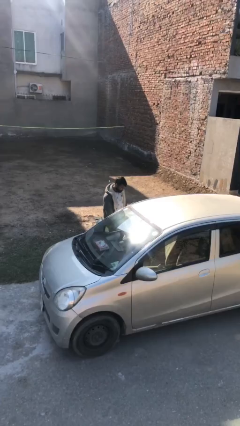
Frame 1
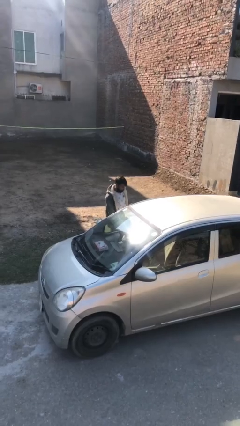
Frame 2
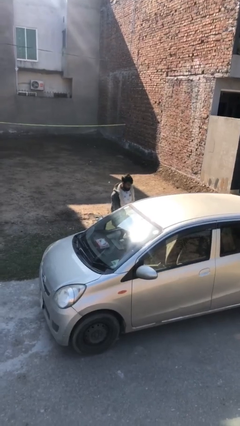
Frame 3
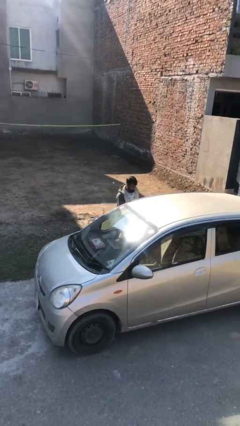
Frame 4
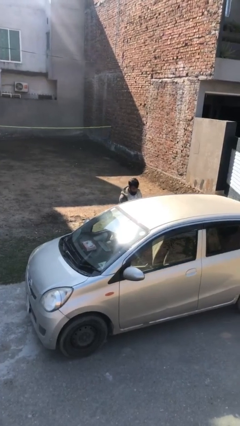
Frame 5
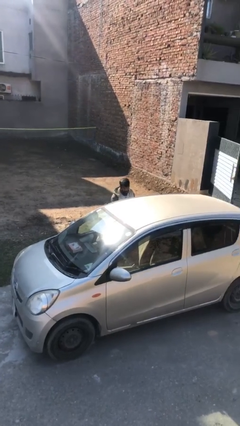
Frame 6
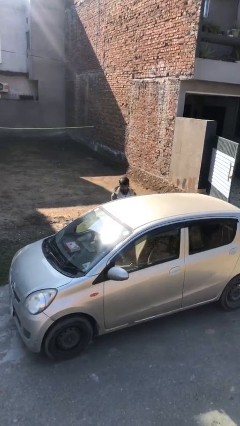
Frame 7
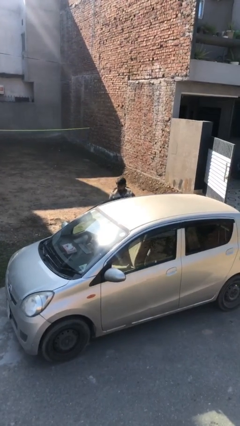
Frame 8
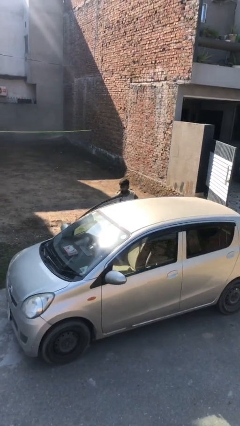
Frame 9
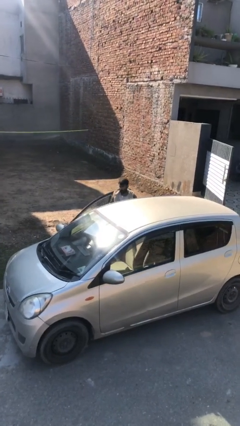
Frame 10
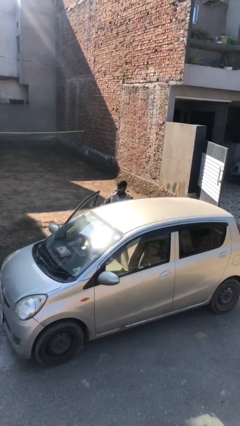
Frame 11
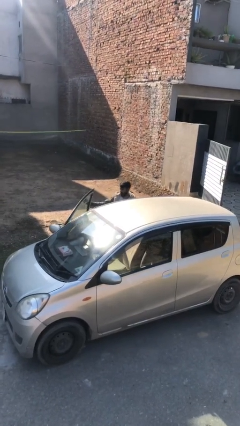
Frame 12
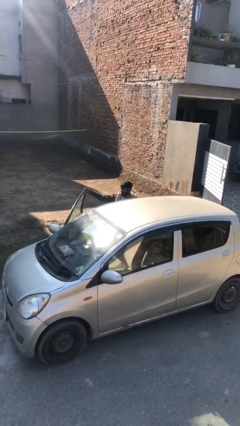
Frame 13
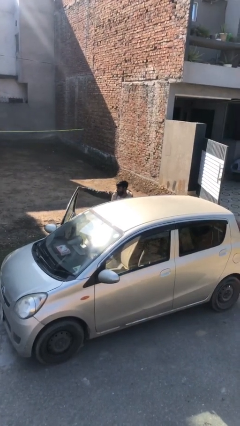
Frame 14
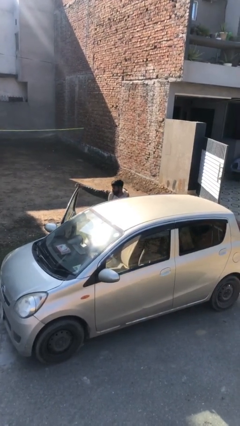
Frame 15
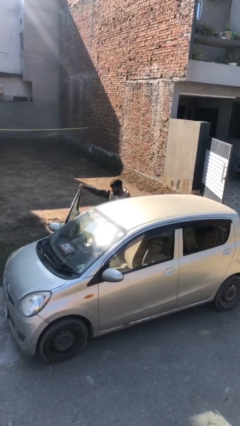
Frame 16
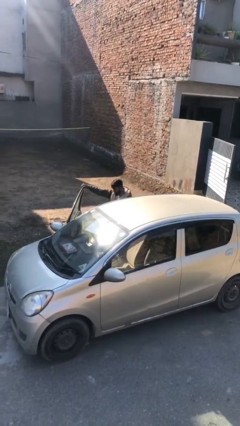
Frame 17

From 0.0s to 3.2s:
person opens car door

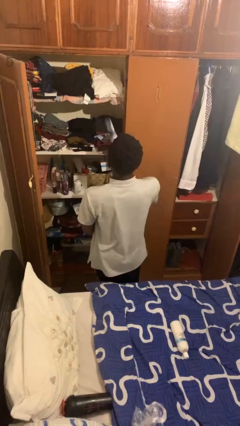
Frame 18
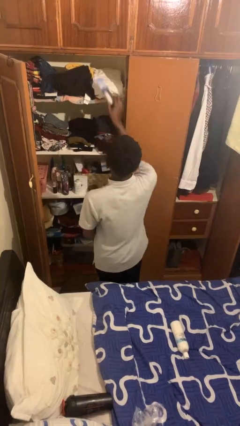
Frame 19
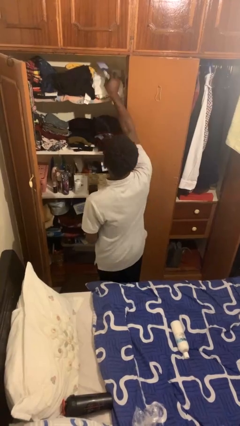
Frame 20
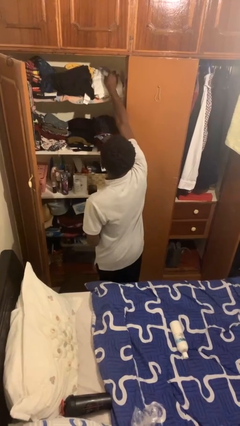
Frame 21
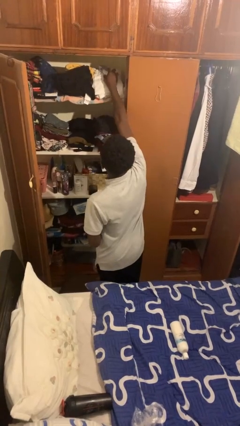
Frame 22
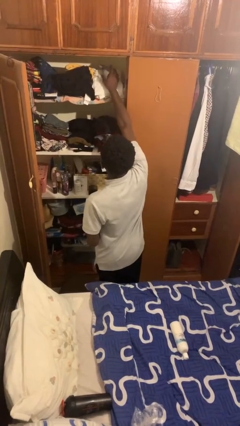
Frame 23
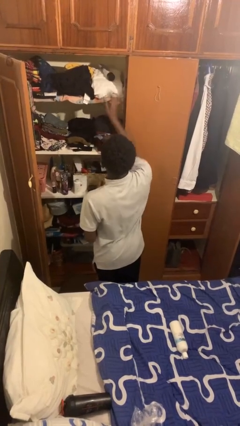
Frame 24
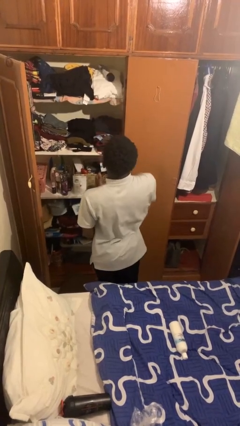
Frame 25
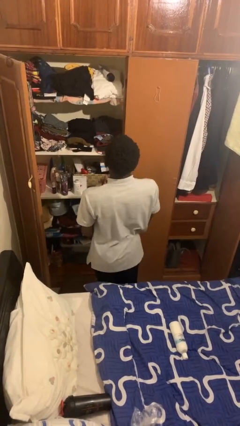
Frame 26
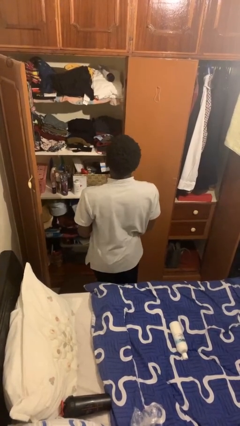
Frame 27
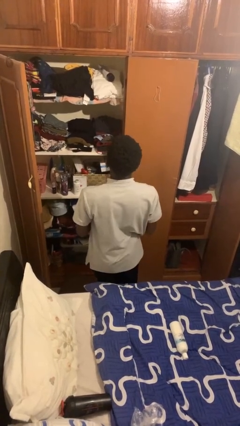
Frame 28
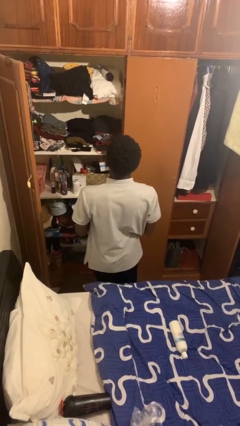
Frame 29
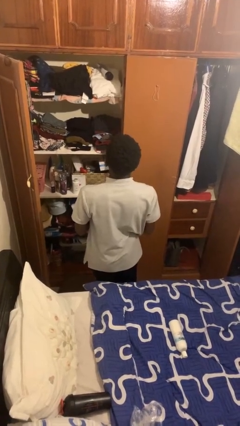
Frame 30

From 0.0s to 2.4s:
person puts down object on shelf

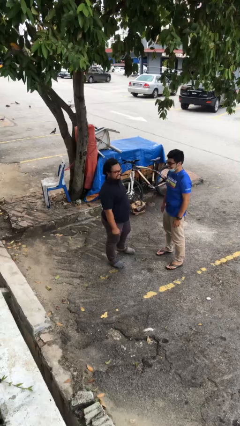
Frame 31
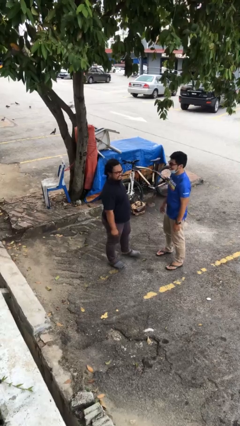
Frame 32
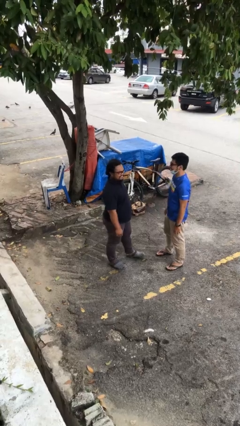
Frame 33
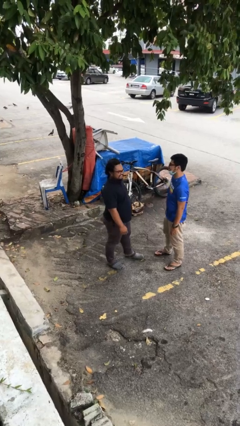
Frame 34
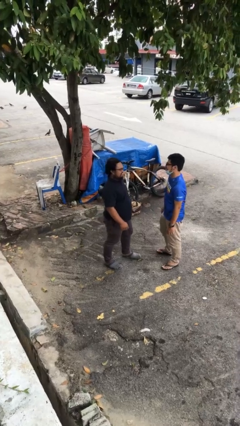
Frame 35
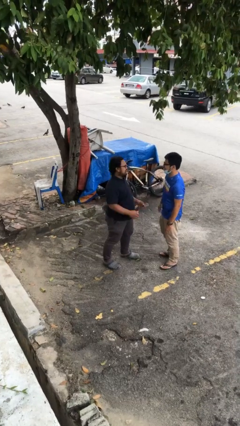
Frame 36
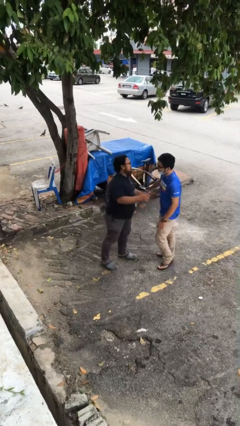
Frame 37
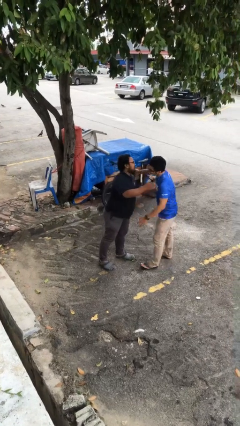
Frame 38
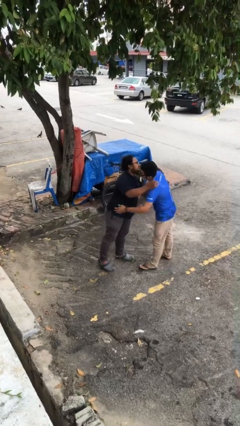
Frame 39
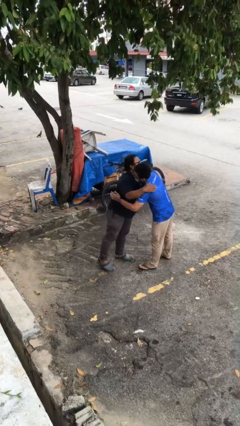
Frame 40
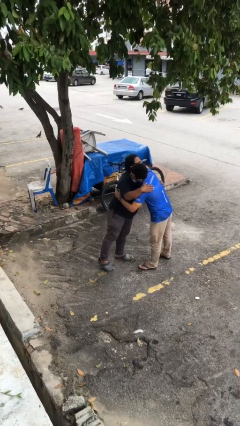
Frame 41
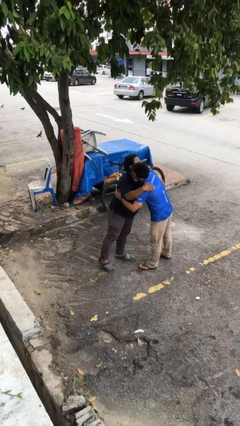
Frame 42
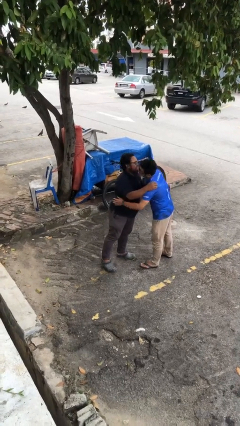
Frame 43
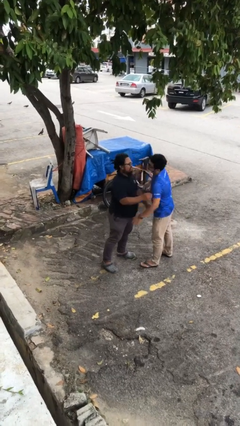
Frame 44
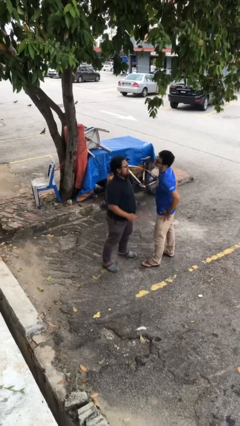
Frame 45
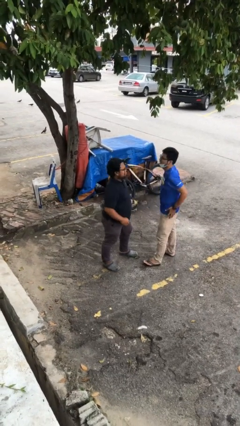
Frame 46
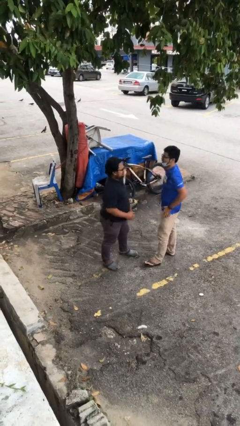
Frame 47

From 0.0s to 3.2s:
person embraces person

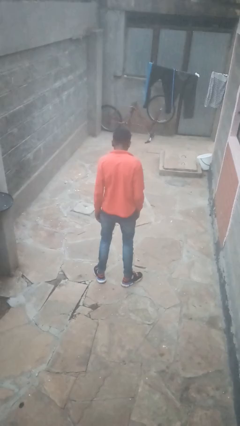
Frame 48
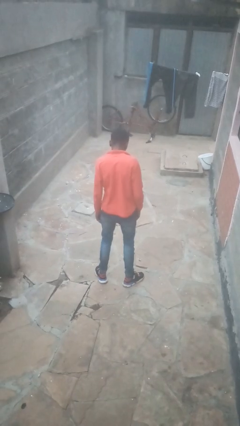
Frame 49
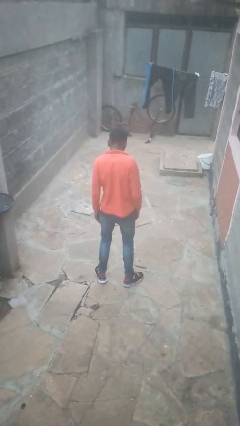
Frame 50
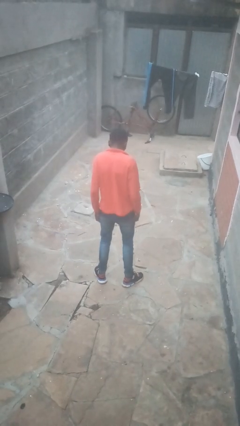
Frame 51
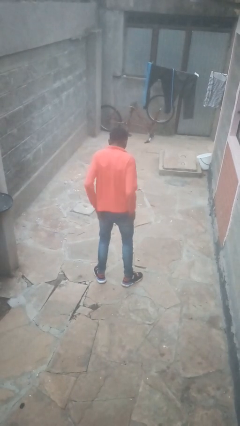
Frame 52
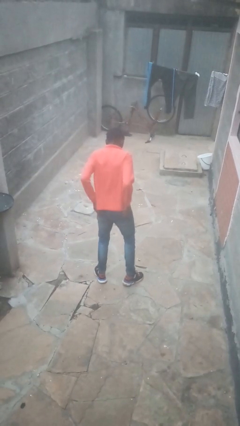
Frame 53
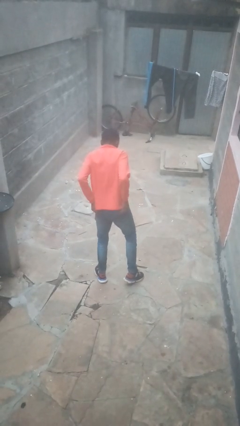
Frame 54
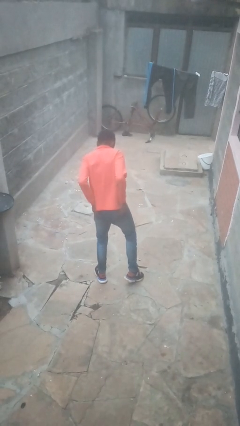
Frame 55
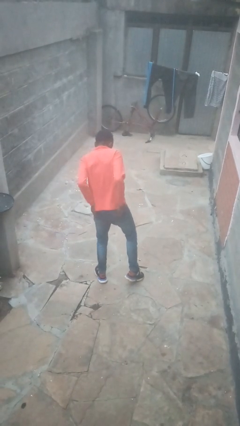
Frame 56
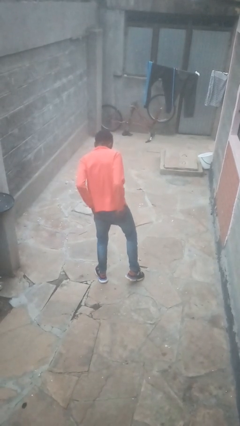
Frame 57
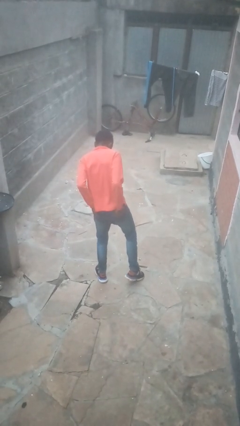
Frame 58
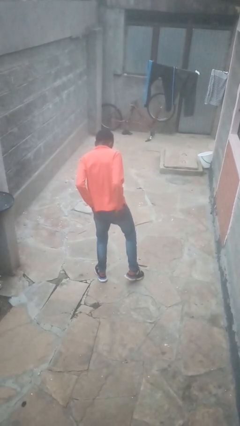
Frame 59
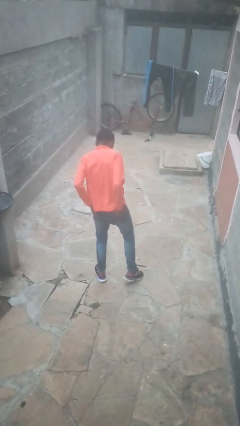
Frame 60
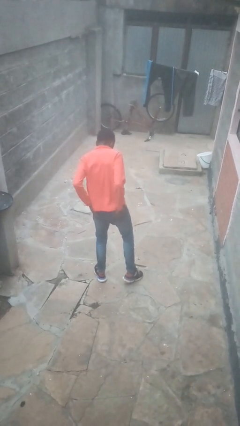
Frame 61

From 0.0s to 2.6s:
person puts hands in back pockets

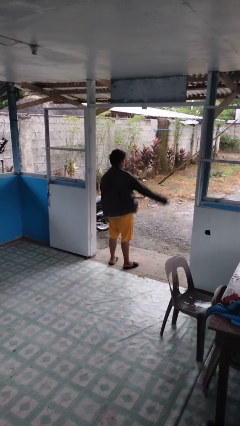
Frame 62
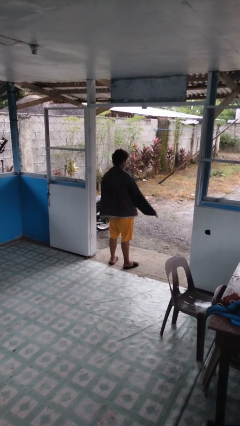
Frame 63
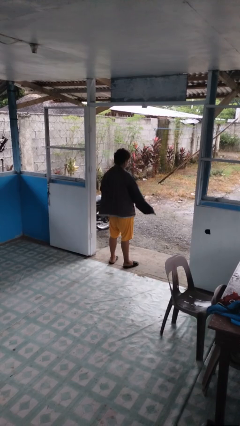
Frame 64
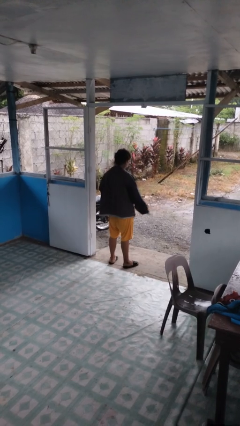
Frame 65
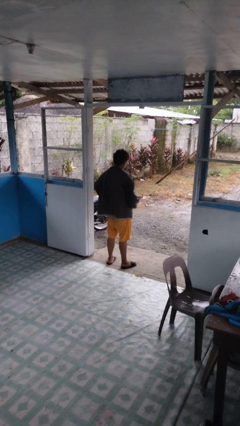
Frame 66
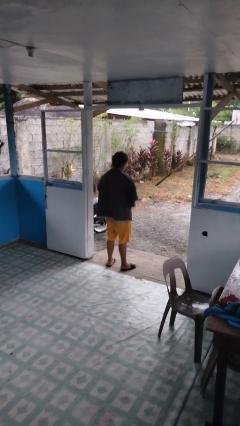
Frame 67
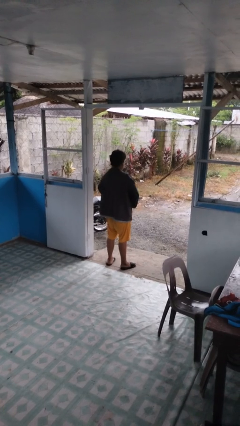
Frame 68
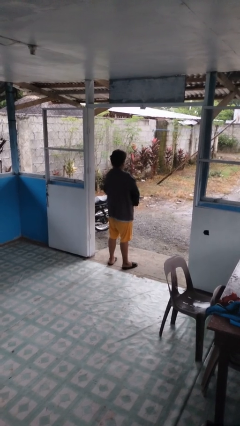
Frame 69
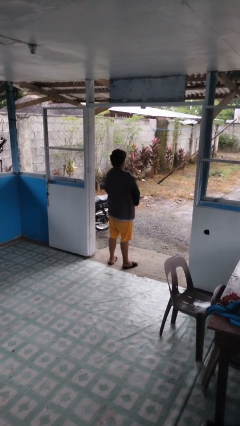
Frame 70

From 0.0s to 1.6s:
person zips up jacket

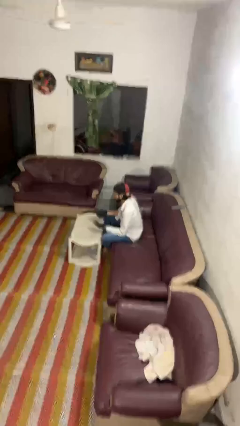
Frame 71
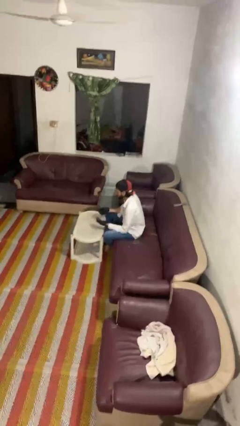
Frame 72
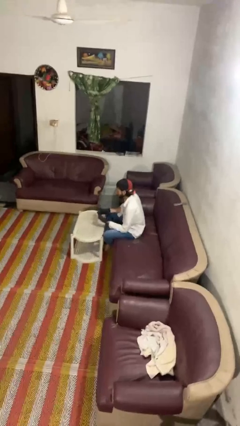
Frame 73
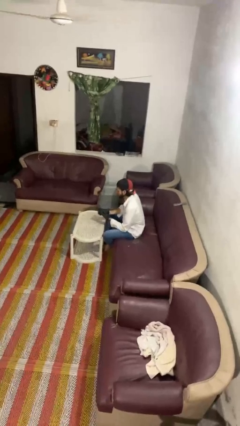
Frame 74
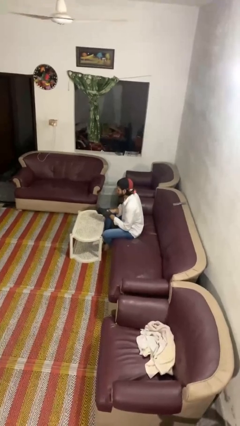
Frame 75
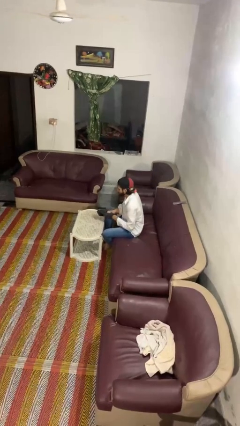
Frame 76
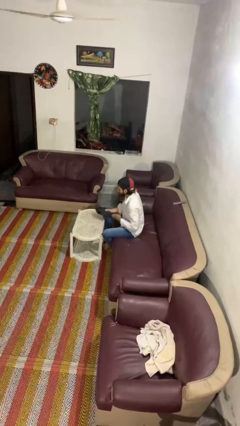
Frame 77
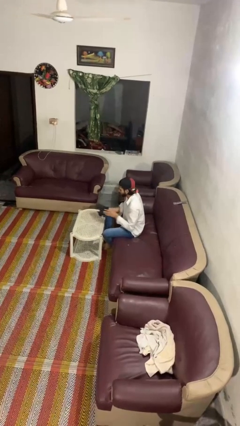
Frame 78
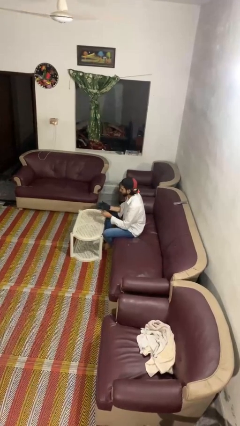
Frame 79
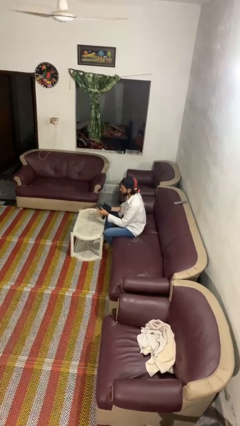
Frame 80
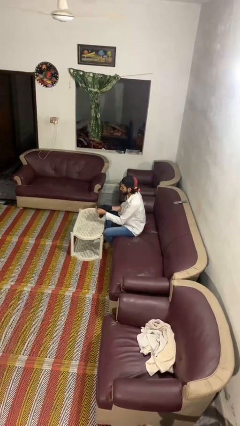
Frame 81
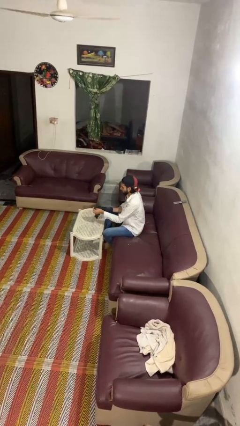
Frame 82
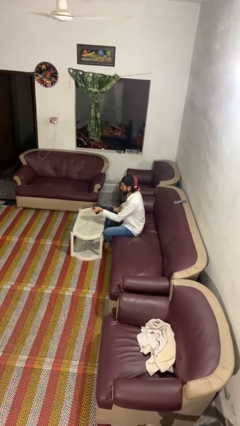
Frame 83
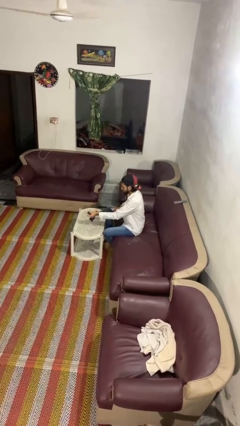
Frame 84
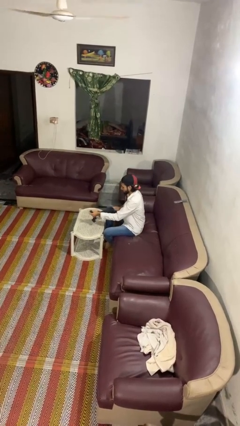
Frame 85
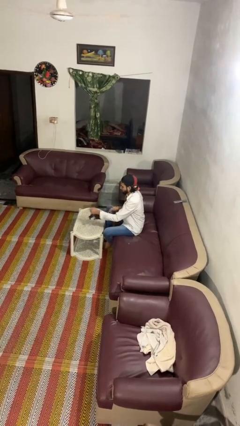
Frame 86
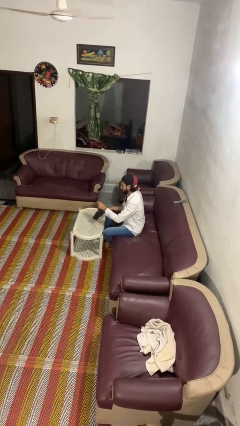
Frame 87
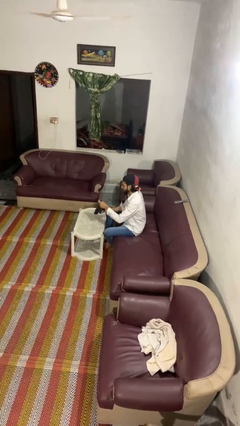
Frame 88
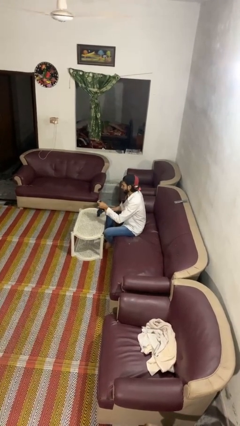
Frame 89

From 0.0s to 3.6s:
person takes off gloves

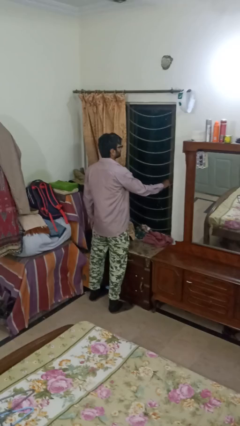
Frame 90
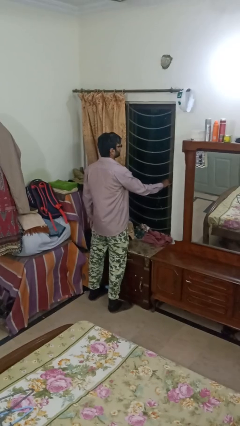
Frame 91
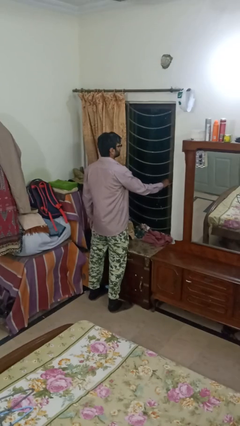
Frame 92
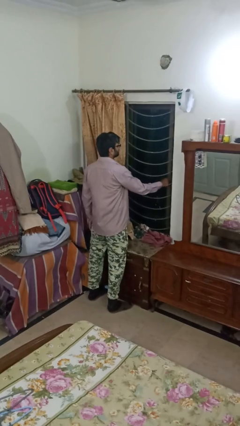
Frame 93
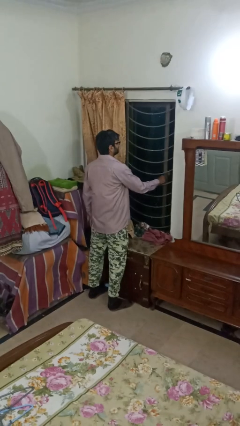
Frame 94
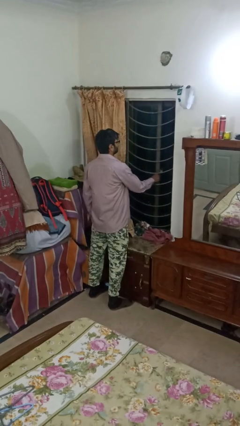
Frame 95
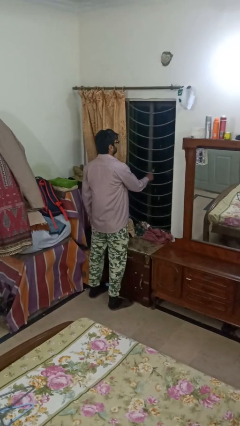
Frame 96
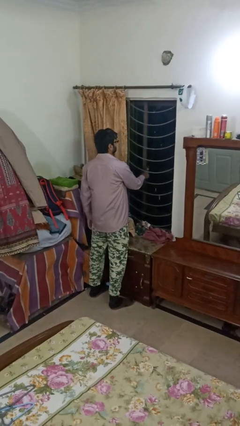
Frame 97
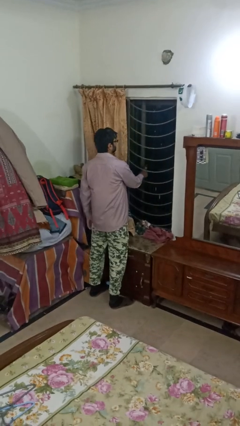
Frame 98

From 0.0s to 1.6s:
person opens home window
